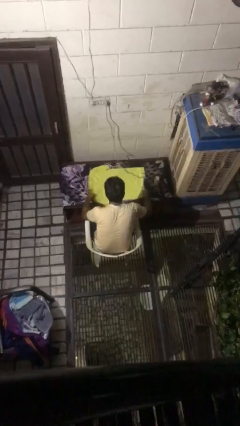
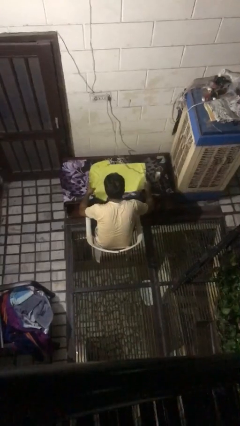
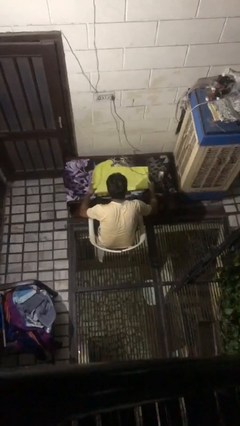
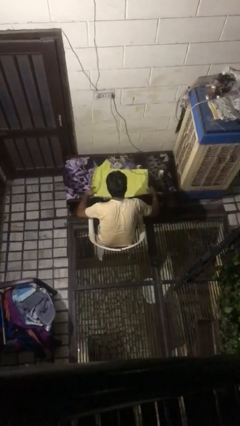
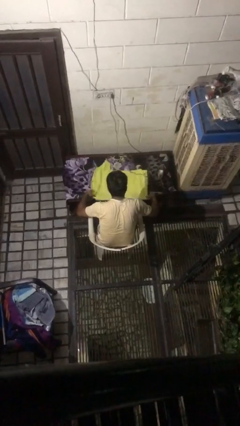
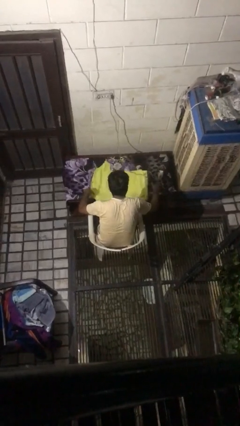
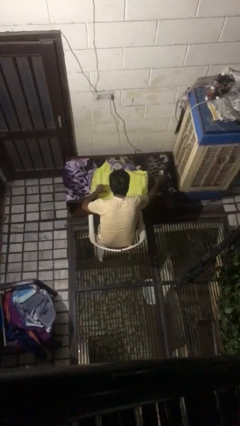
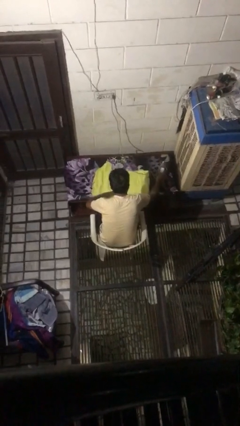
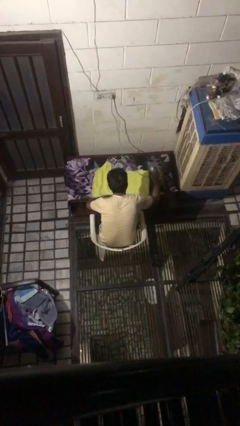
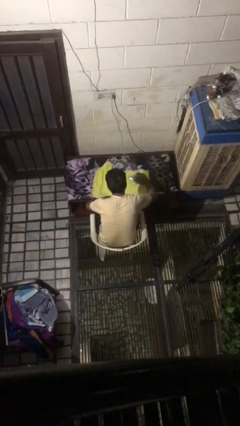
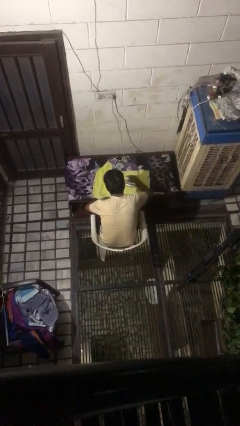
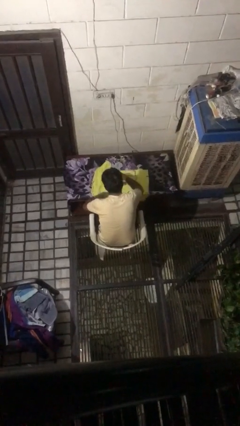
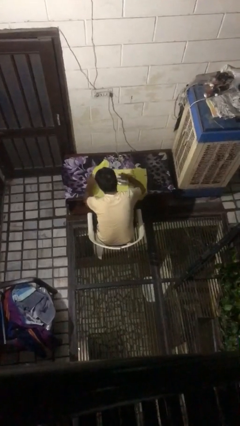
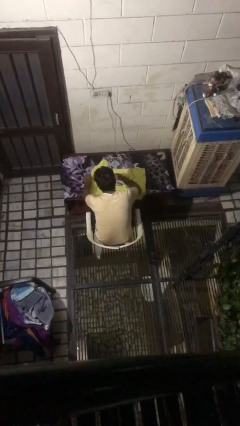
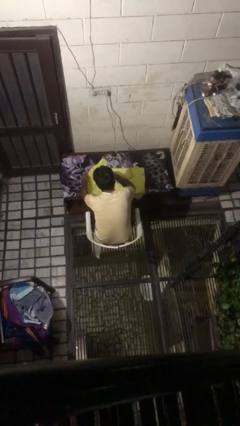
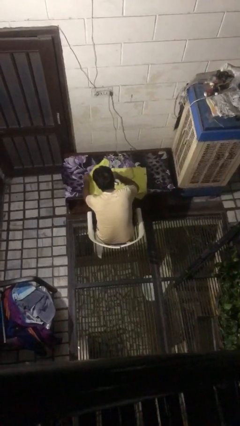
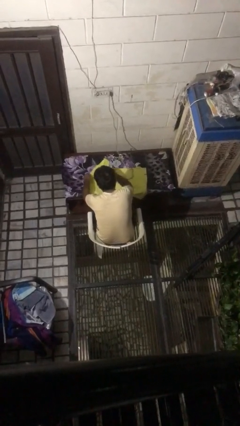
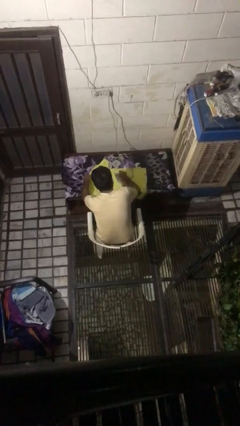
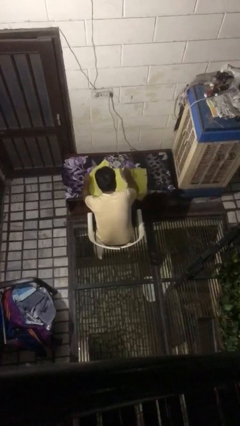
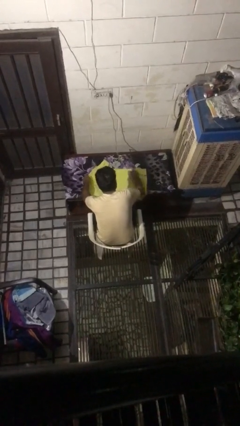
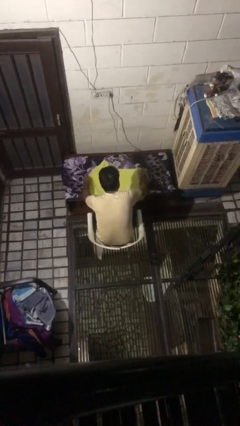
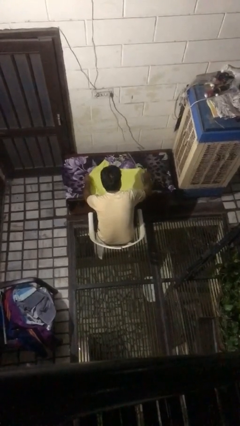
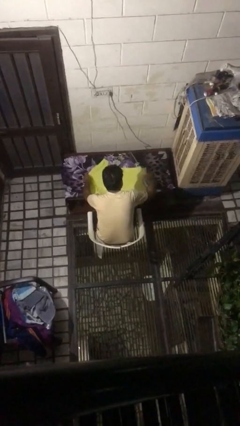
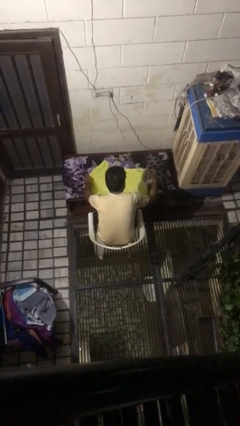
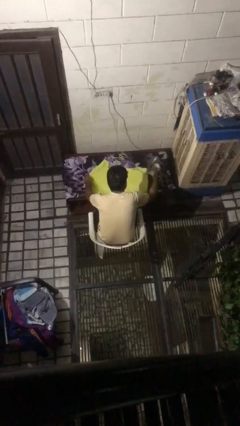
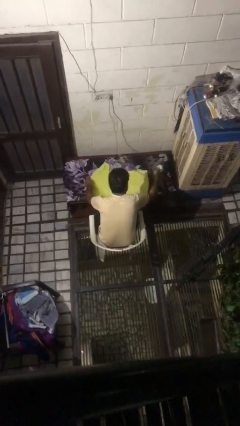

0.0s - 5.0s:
person irons clothes

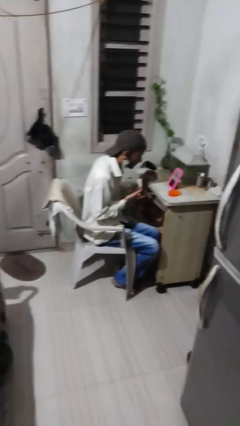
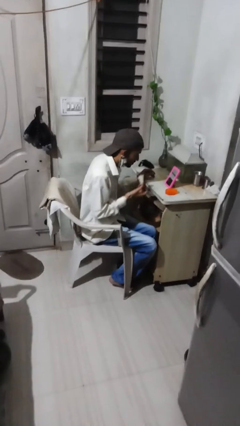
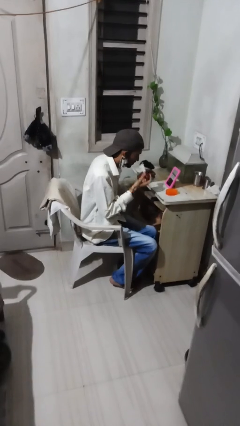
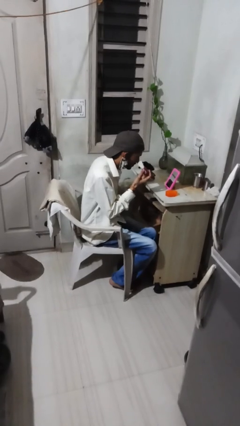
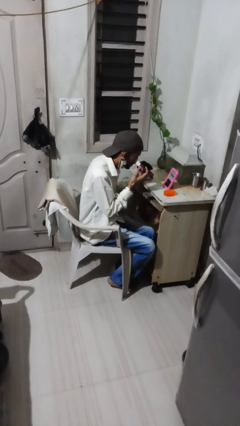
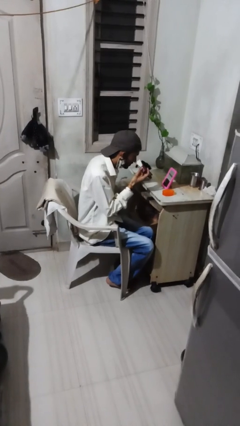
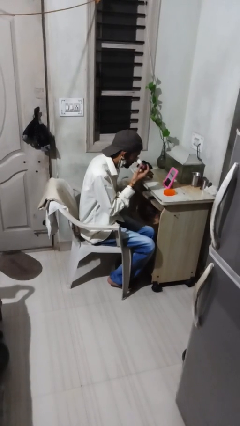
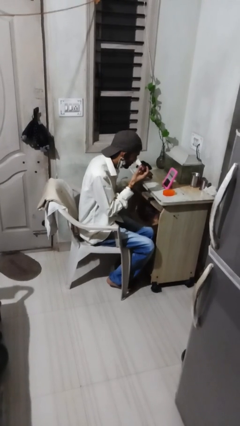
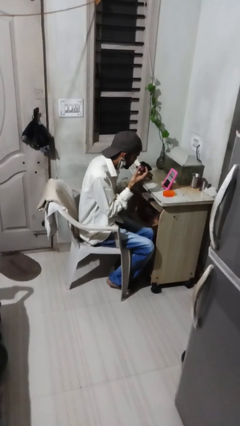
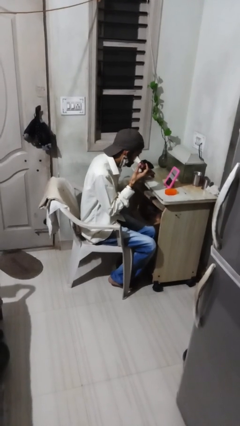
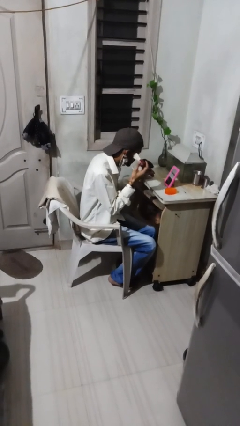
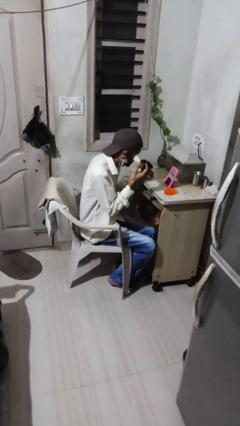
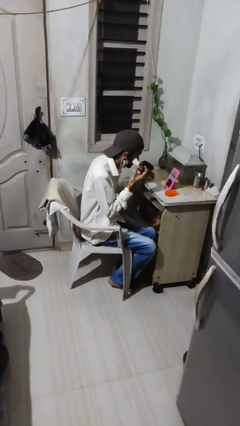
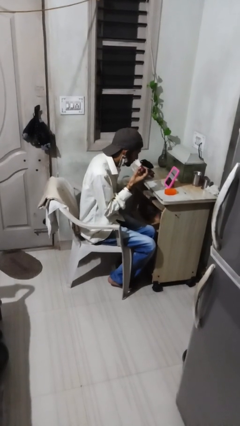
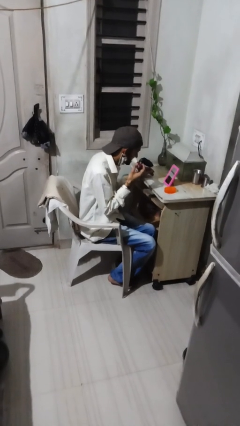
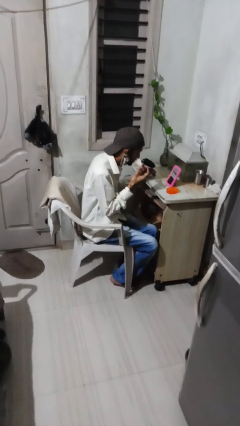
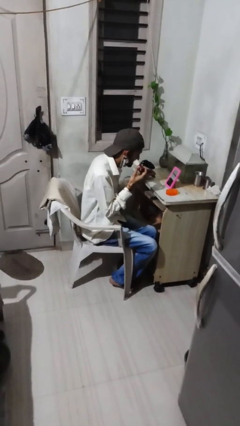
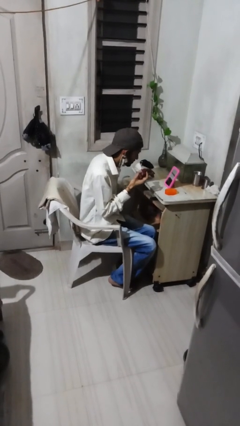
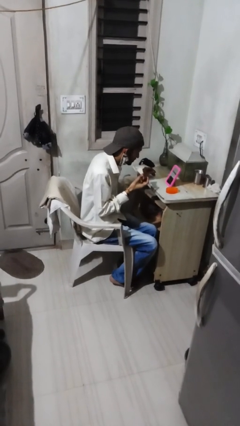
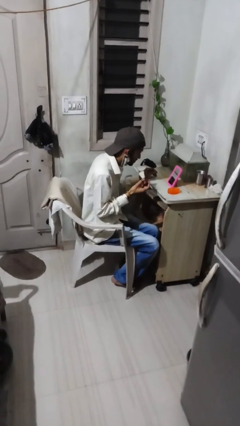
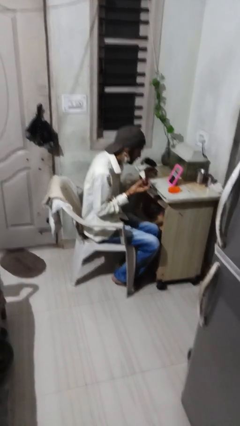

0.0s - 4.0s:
person applies foundation makeup

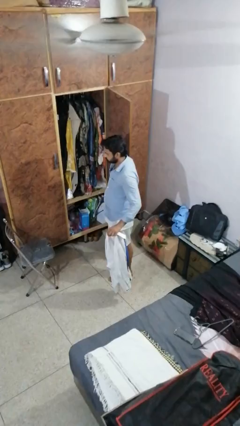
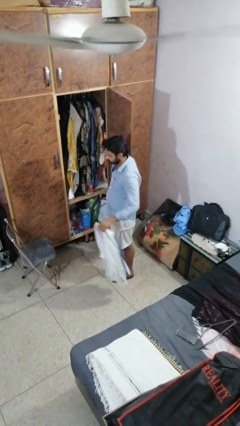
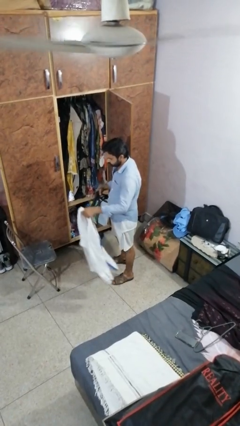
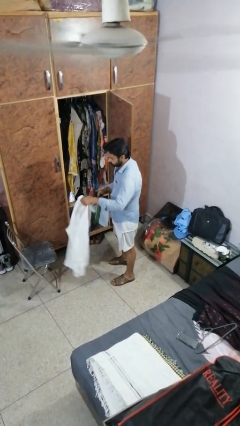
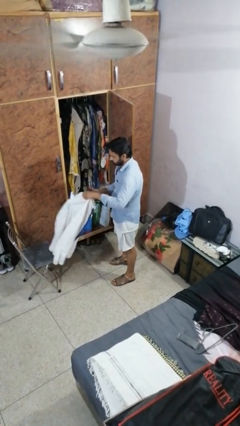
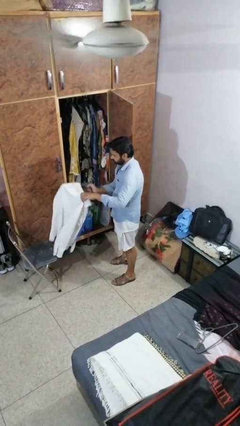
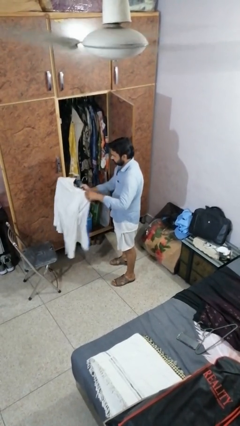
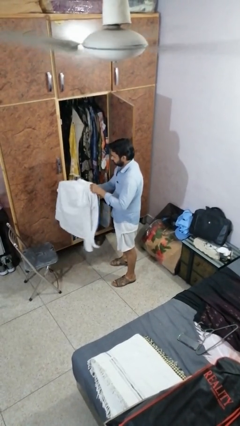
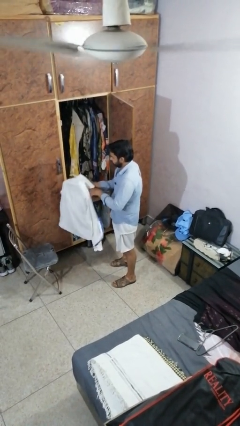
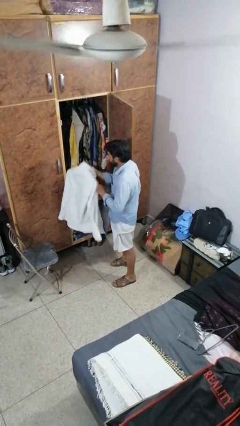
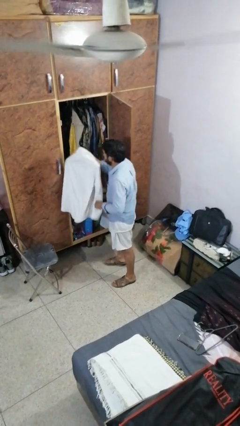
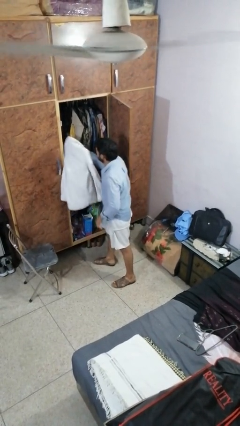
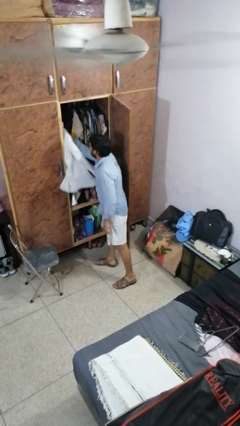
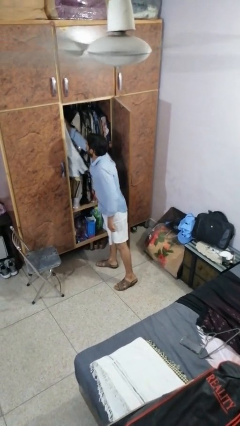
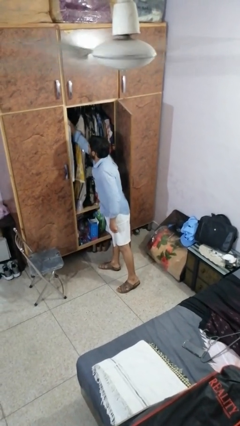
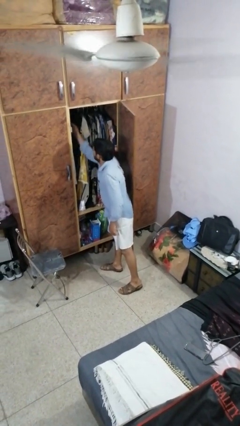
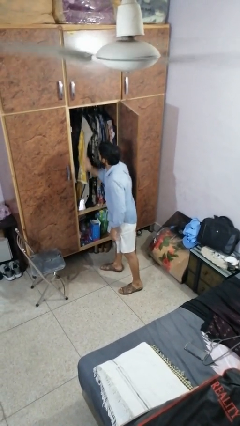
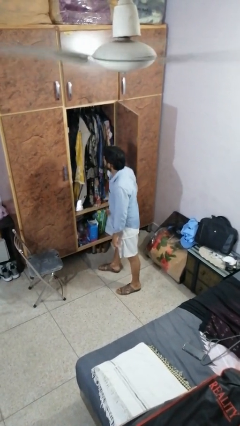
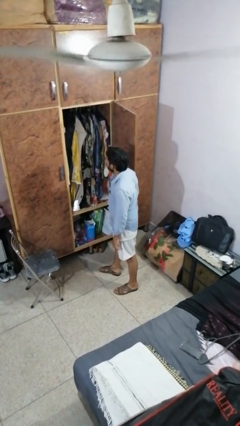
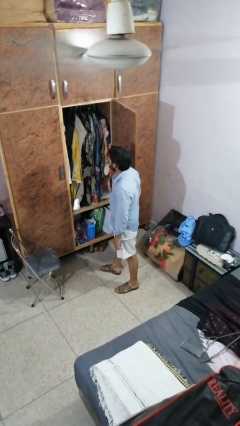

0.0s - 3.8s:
person puts clothes into closet

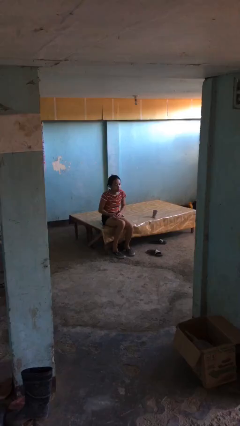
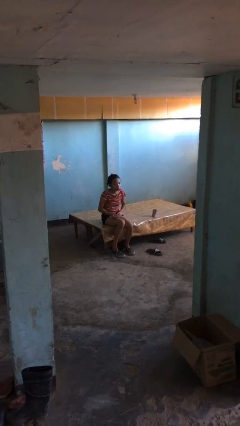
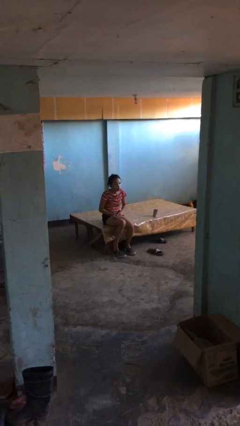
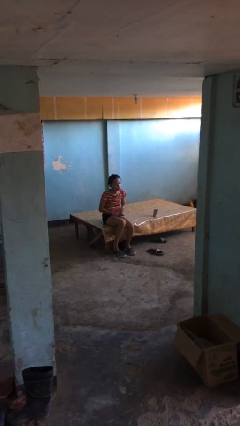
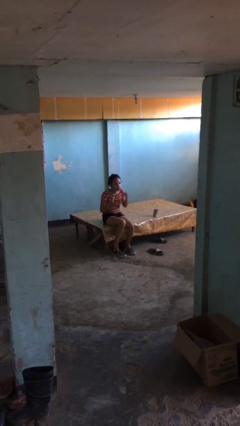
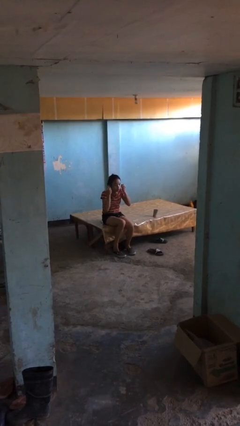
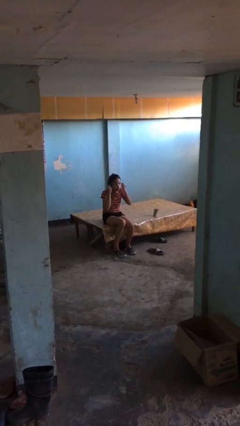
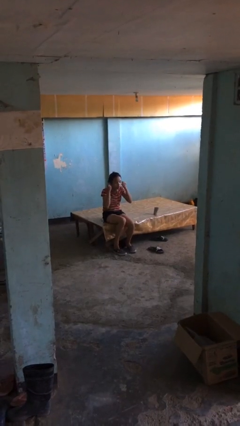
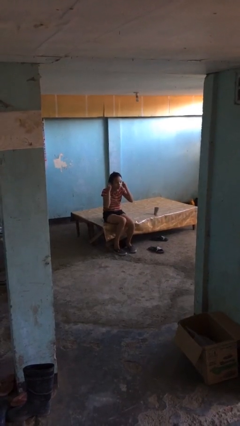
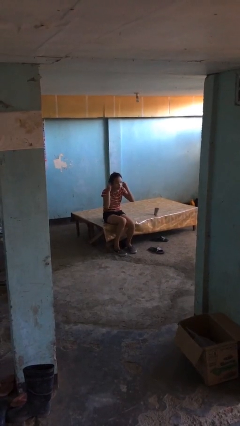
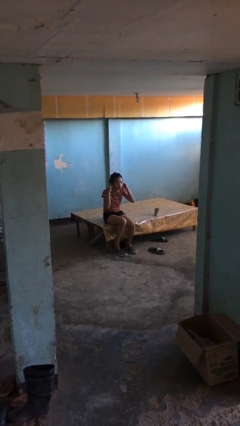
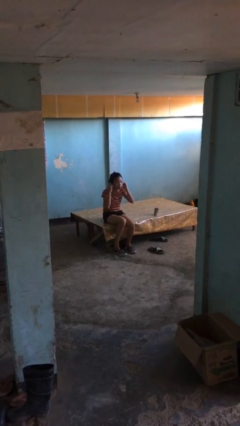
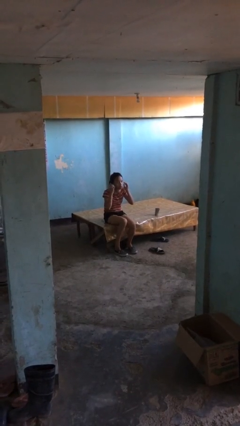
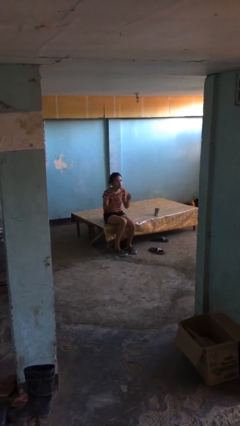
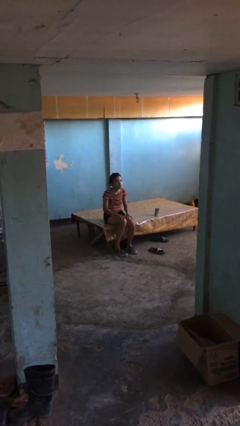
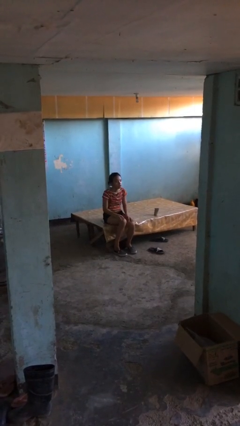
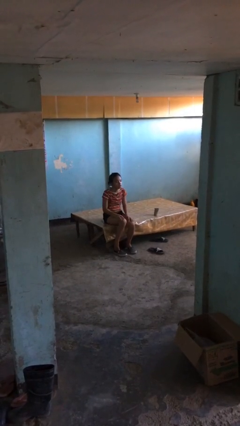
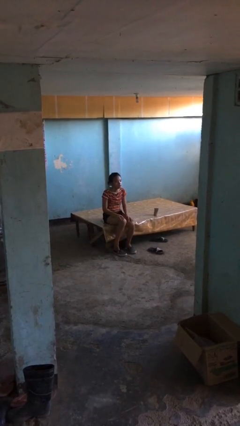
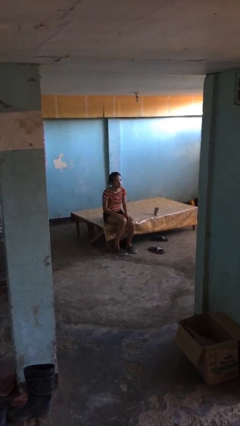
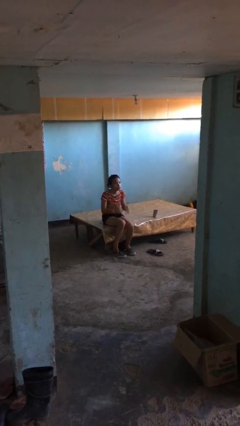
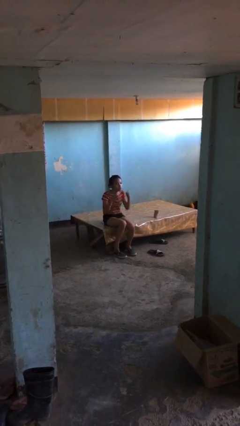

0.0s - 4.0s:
person puts on headphones

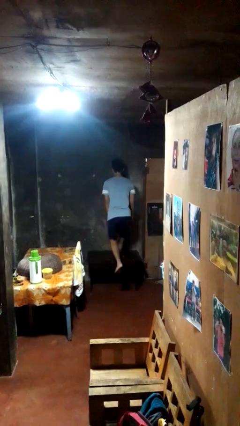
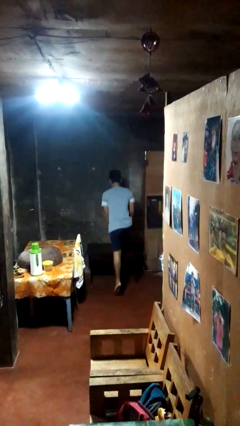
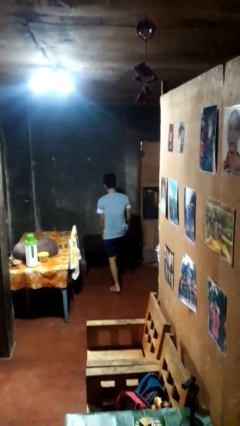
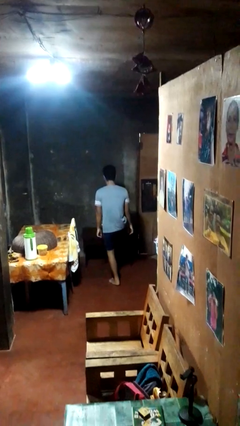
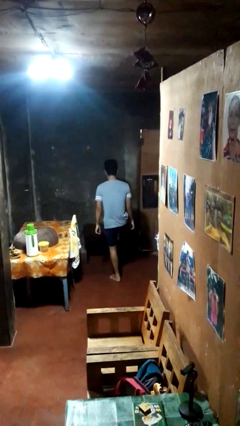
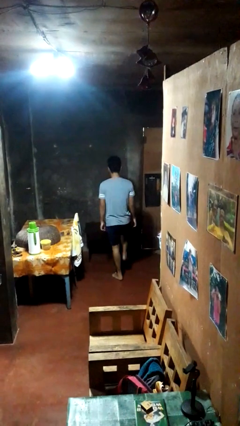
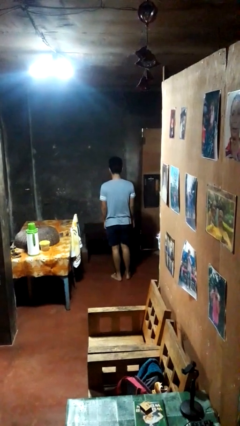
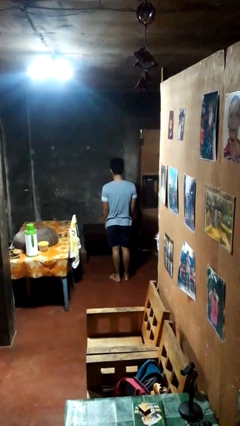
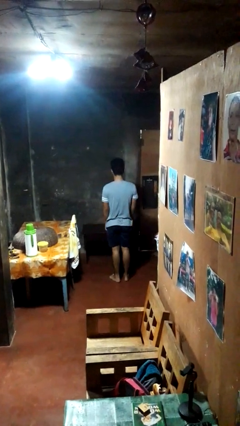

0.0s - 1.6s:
person climbs off table
